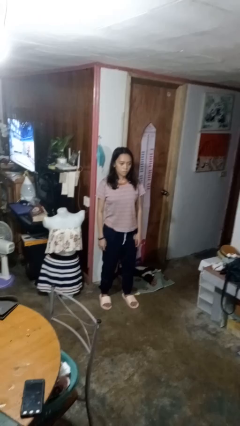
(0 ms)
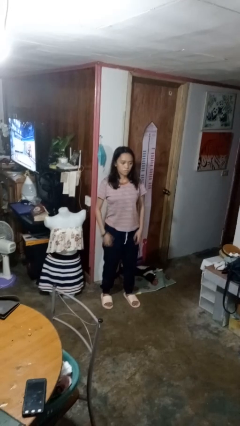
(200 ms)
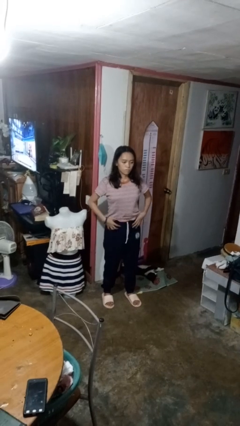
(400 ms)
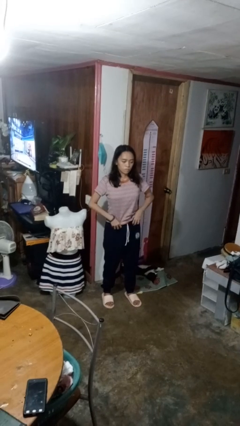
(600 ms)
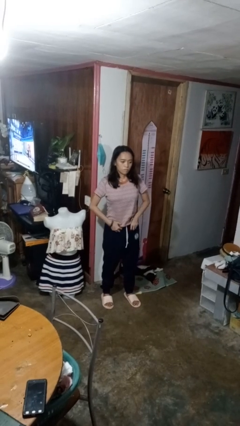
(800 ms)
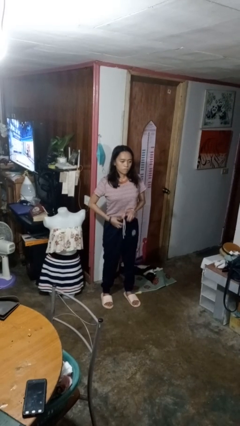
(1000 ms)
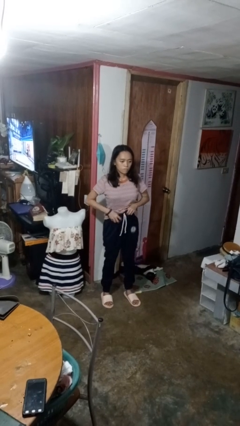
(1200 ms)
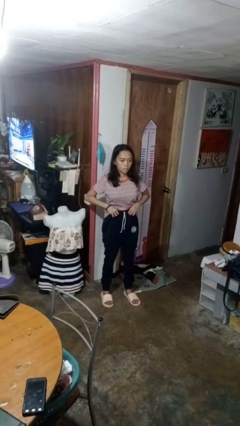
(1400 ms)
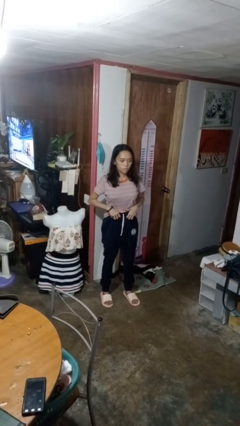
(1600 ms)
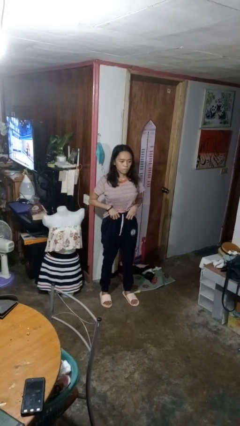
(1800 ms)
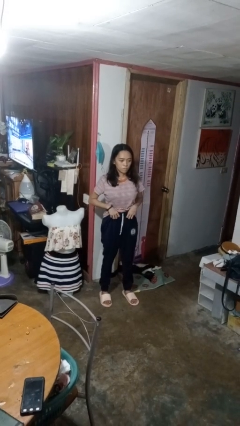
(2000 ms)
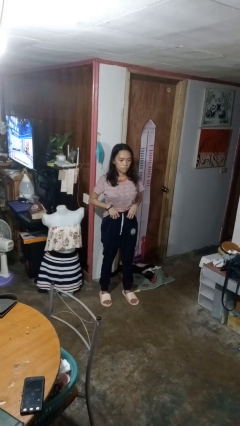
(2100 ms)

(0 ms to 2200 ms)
person hikes up pants

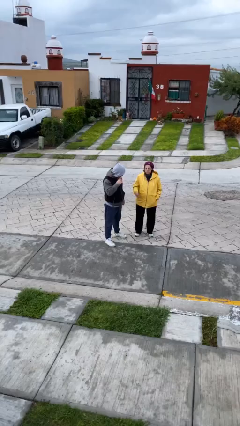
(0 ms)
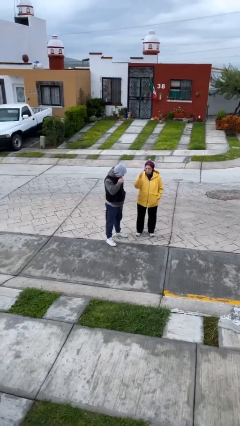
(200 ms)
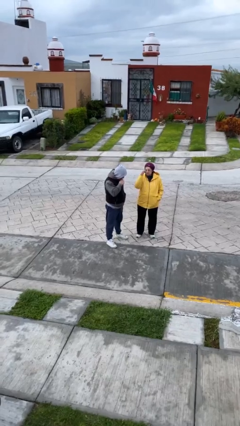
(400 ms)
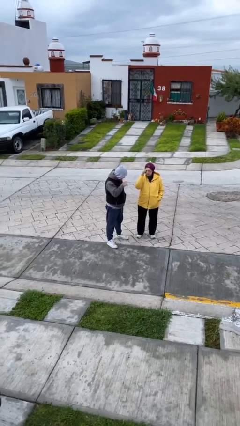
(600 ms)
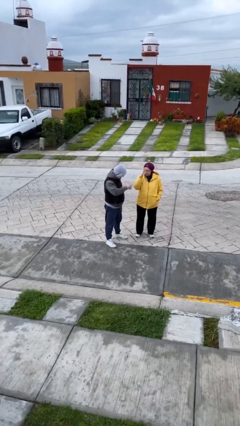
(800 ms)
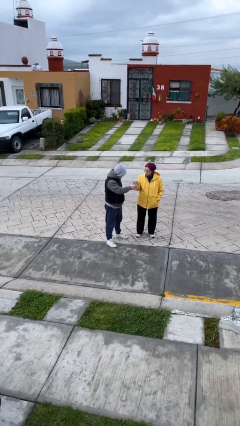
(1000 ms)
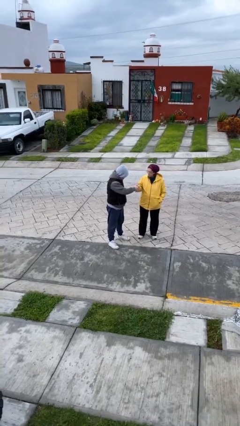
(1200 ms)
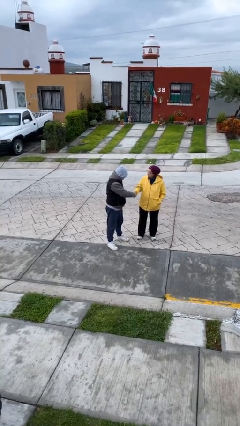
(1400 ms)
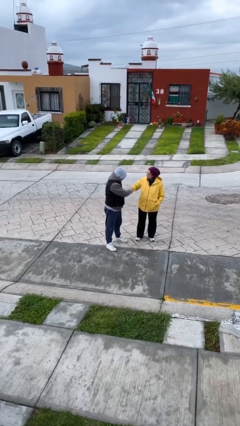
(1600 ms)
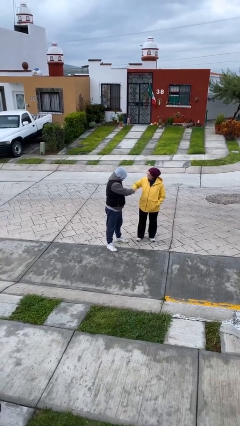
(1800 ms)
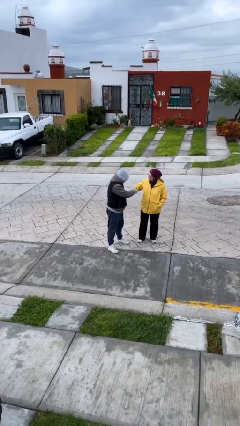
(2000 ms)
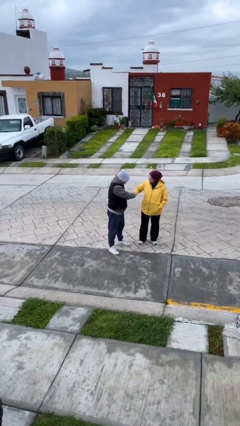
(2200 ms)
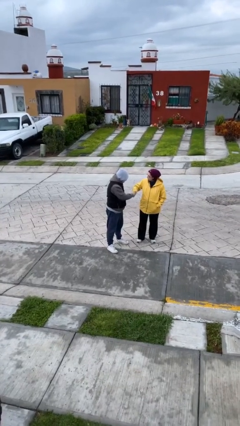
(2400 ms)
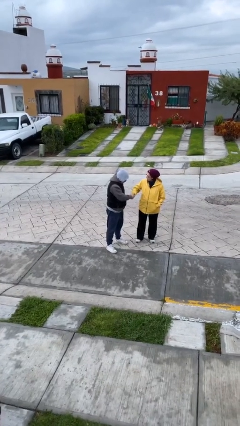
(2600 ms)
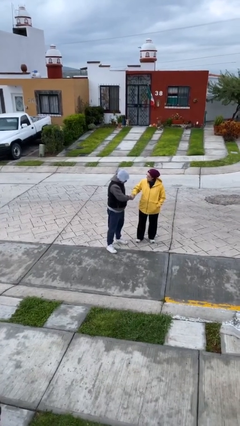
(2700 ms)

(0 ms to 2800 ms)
person shakes hand

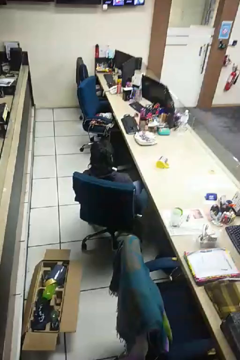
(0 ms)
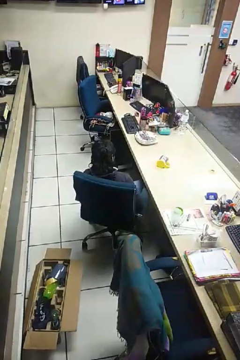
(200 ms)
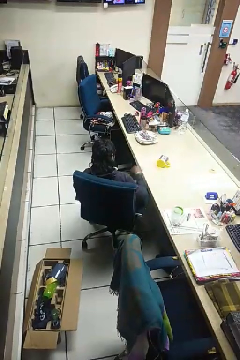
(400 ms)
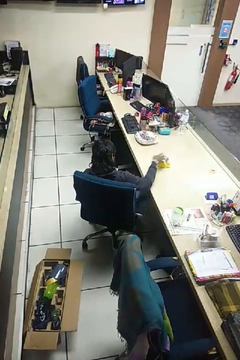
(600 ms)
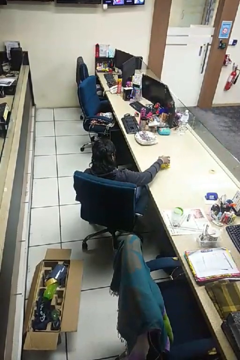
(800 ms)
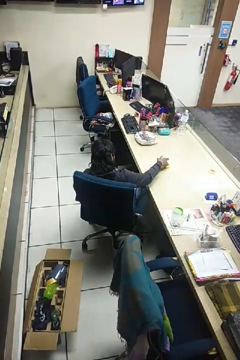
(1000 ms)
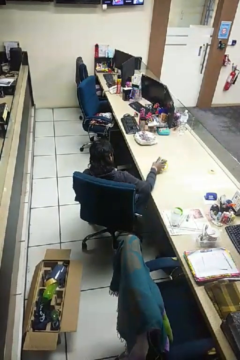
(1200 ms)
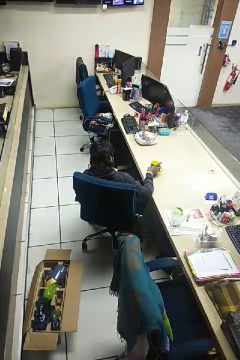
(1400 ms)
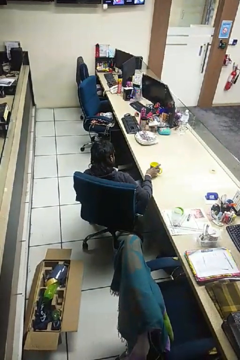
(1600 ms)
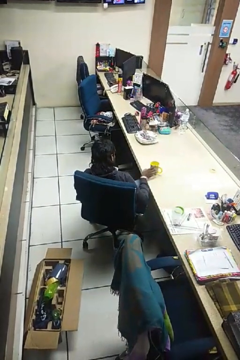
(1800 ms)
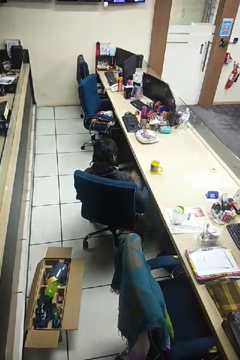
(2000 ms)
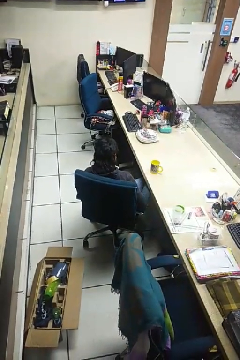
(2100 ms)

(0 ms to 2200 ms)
person sets upright glass

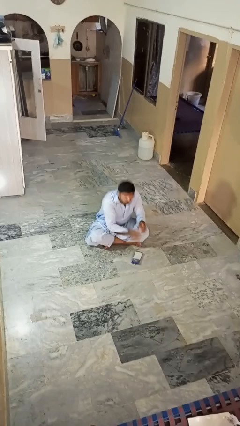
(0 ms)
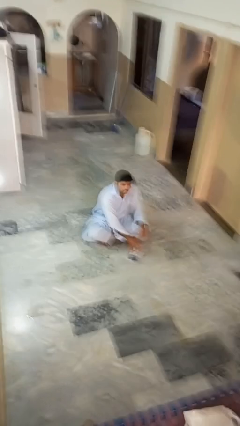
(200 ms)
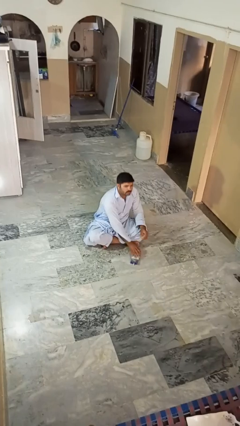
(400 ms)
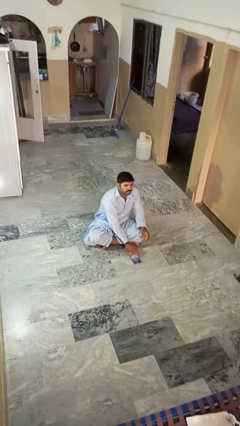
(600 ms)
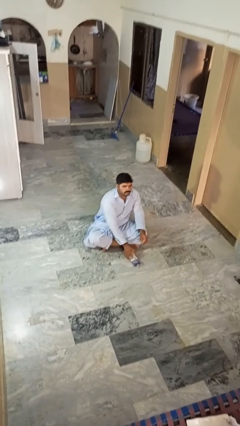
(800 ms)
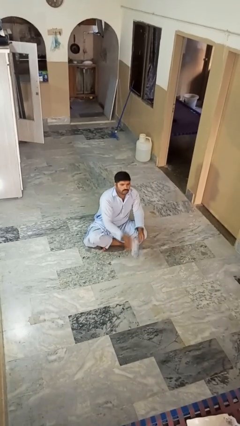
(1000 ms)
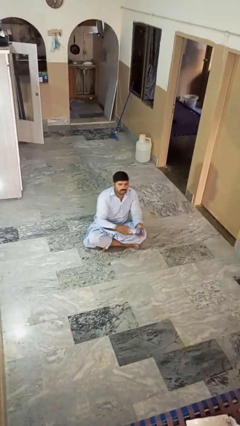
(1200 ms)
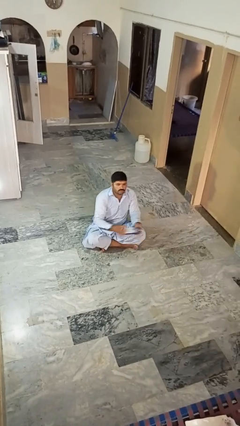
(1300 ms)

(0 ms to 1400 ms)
person picks up object from floor

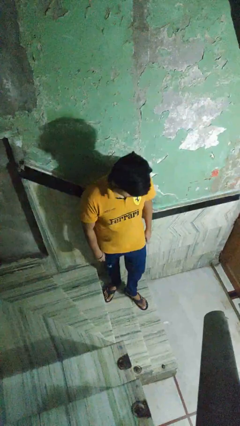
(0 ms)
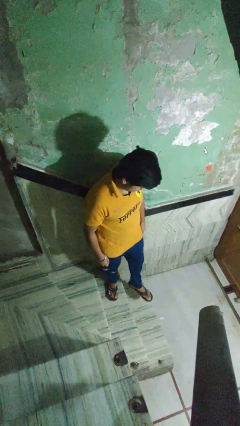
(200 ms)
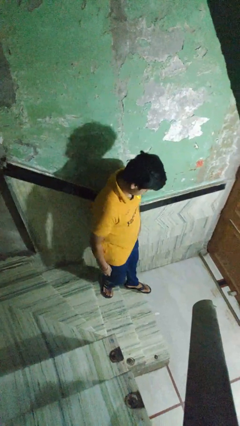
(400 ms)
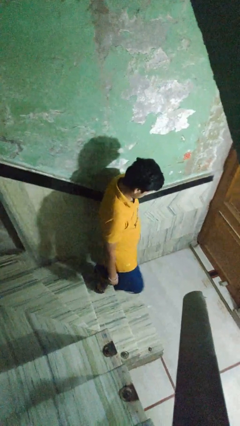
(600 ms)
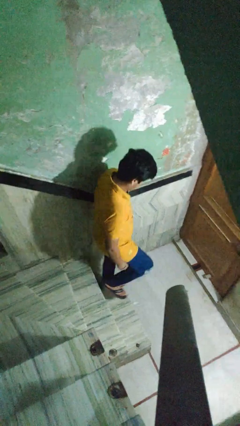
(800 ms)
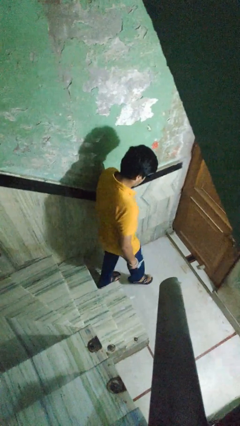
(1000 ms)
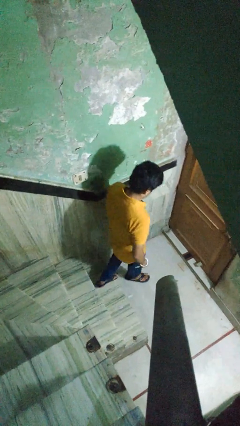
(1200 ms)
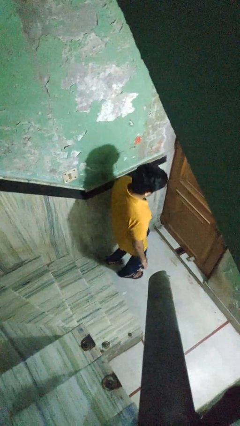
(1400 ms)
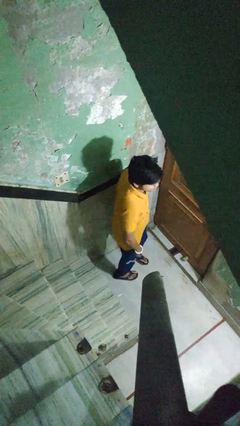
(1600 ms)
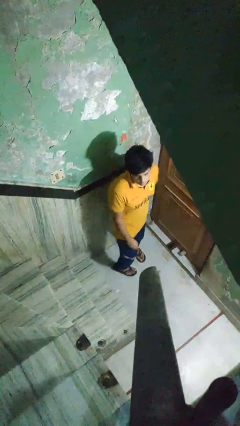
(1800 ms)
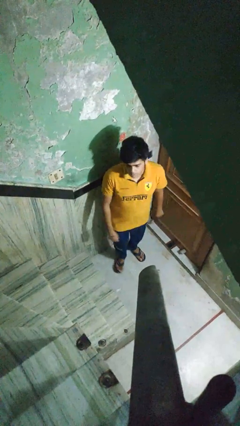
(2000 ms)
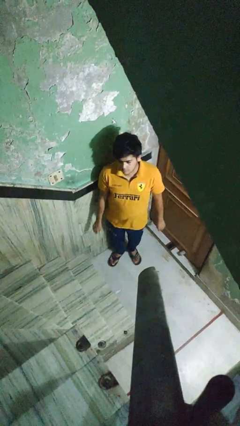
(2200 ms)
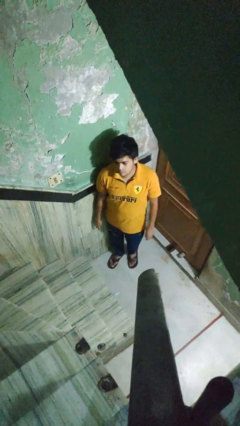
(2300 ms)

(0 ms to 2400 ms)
person climbs down stairs

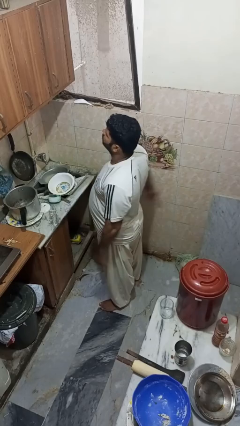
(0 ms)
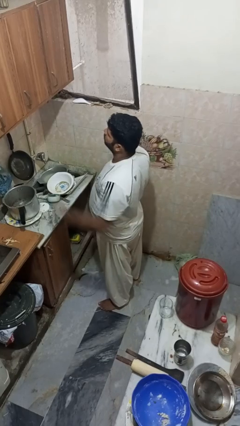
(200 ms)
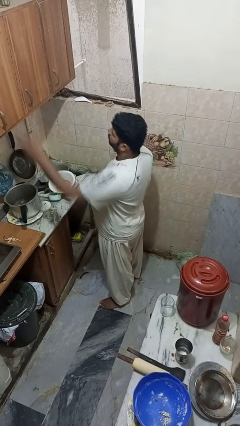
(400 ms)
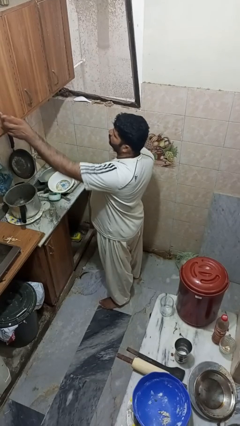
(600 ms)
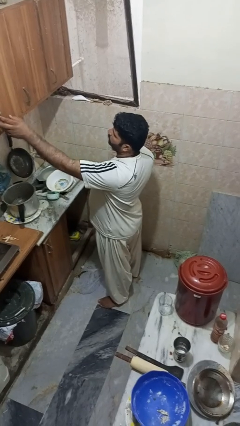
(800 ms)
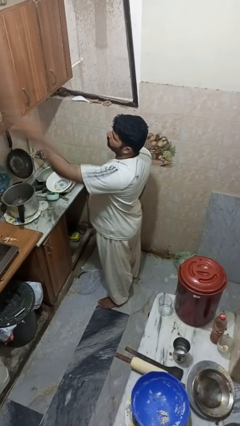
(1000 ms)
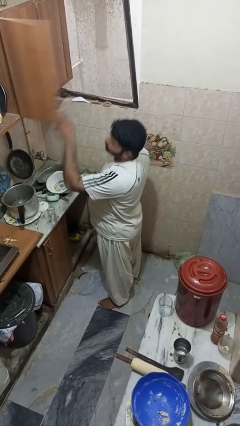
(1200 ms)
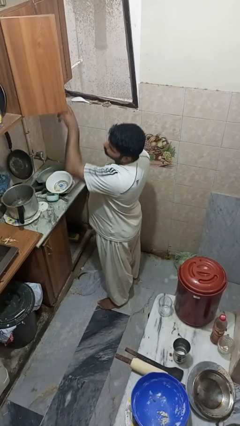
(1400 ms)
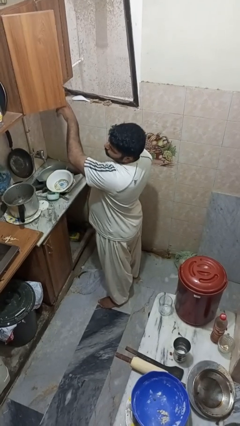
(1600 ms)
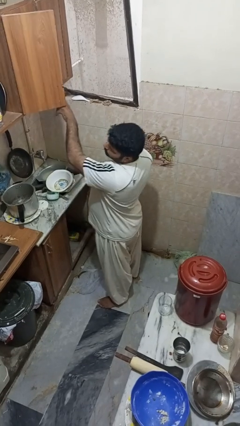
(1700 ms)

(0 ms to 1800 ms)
person opens cabinet

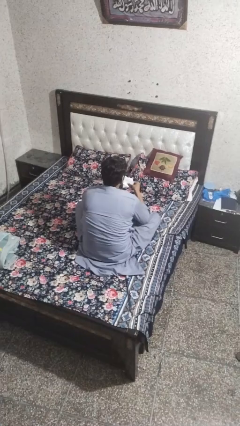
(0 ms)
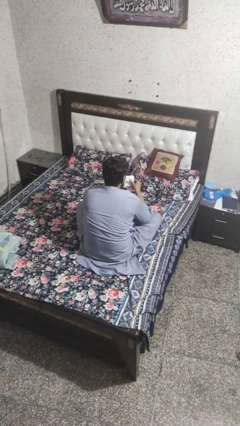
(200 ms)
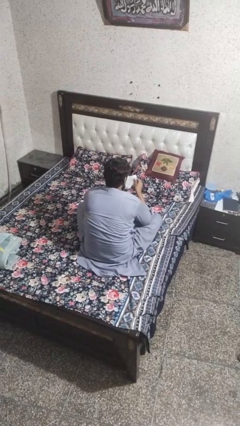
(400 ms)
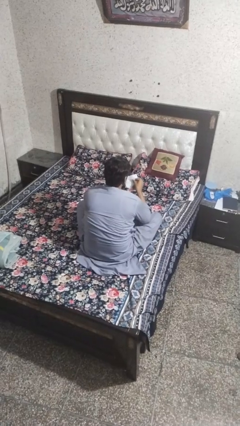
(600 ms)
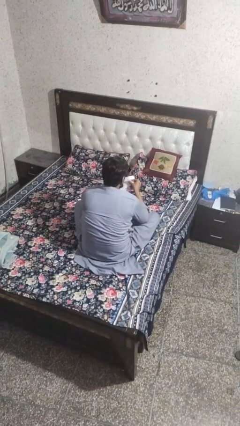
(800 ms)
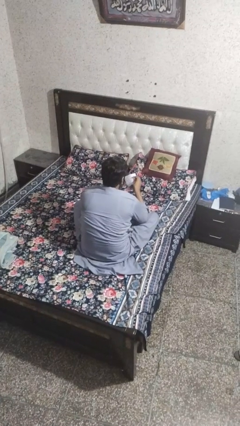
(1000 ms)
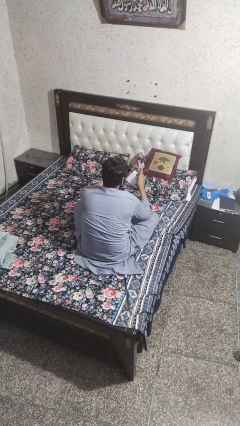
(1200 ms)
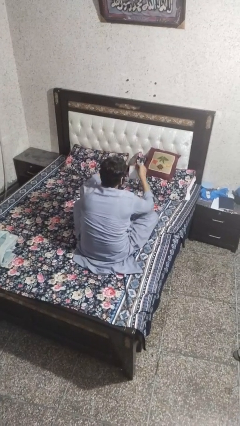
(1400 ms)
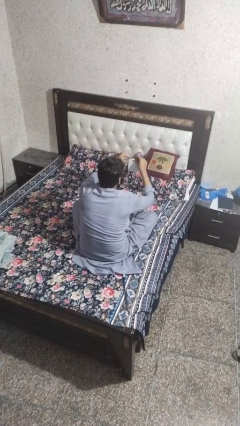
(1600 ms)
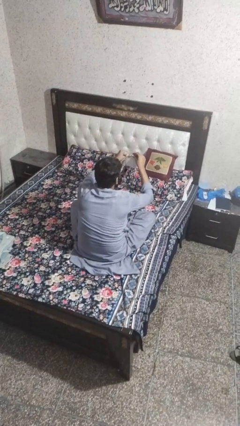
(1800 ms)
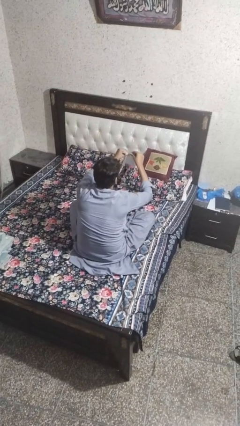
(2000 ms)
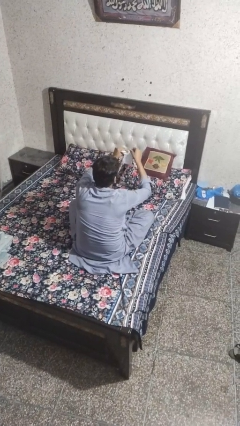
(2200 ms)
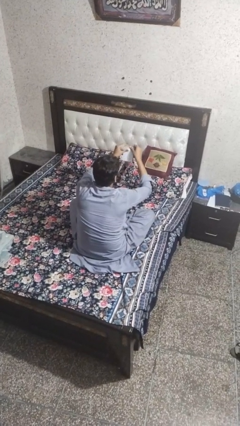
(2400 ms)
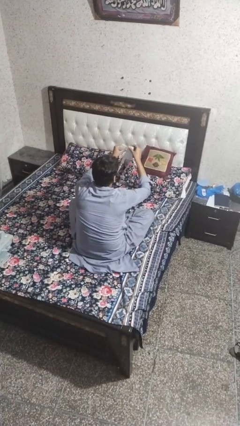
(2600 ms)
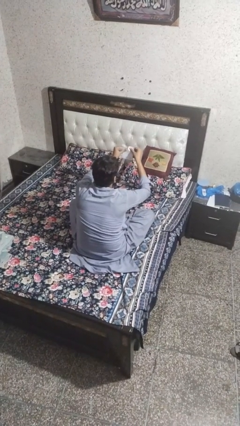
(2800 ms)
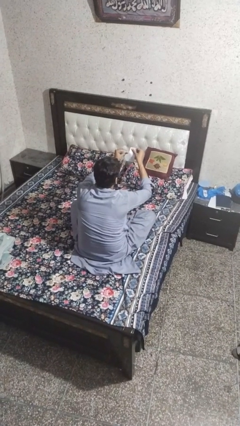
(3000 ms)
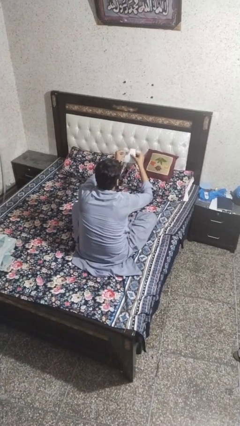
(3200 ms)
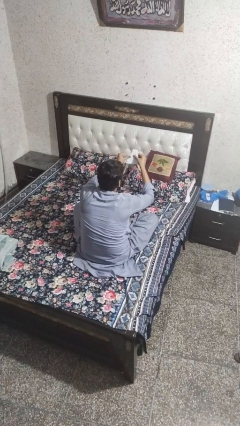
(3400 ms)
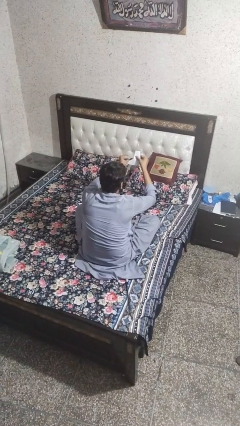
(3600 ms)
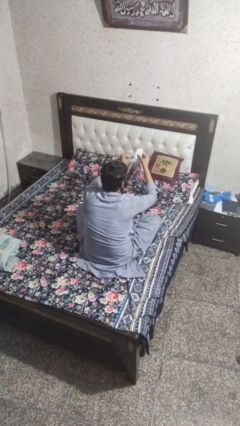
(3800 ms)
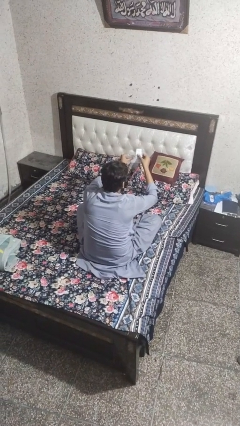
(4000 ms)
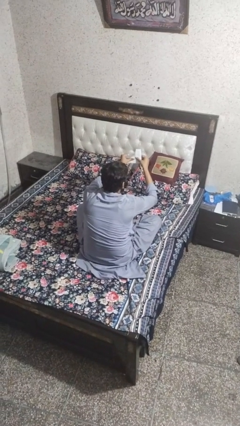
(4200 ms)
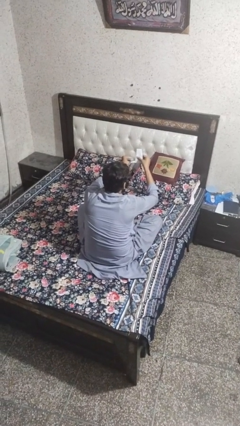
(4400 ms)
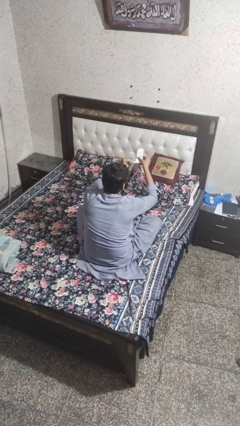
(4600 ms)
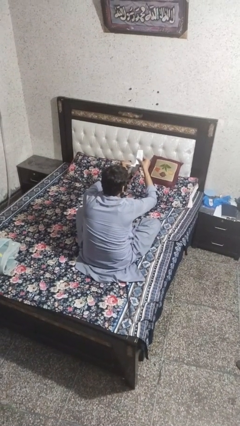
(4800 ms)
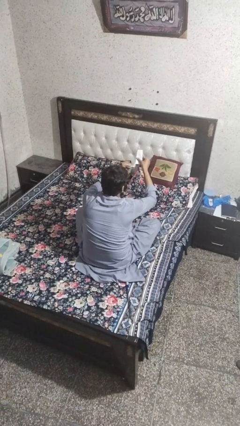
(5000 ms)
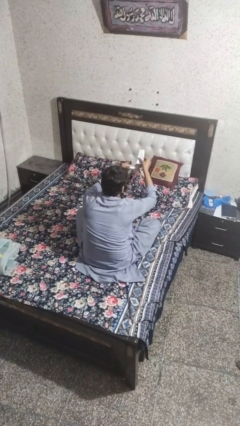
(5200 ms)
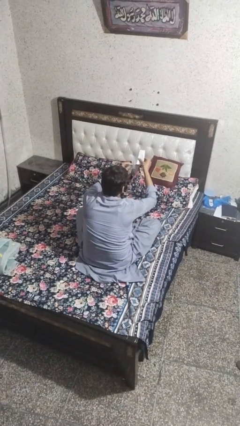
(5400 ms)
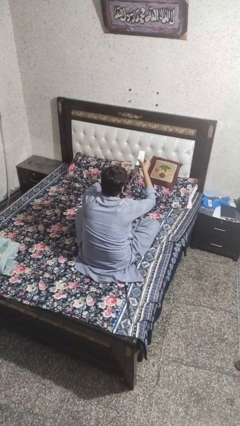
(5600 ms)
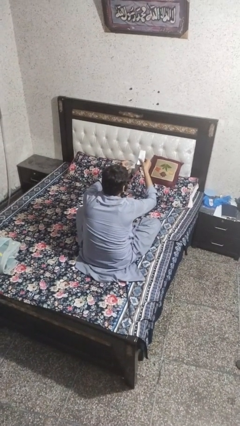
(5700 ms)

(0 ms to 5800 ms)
person tears paper
